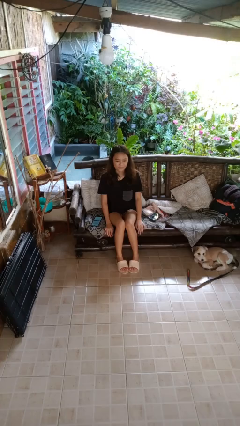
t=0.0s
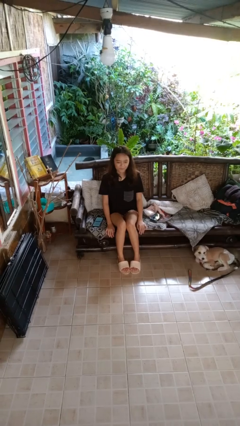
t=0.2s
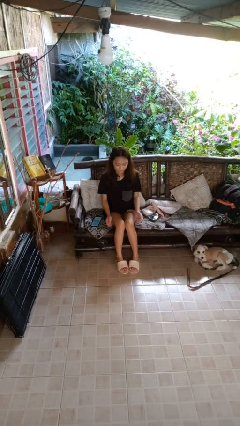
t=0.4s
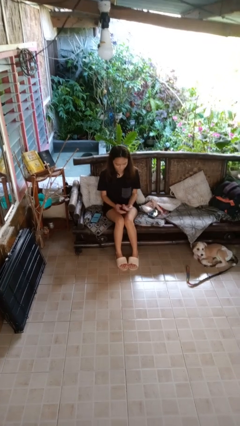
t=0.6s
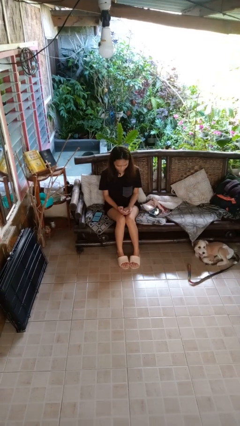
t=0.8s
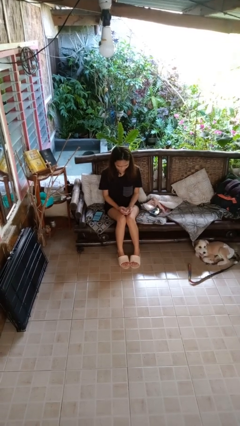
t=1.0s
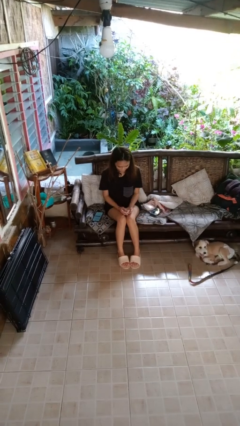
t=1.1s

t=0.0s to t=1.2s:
person looks at hands in lap

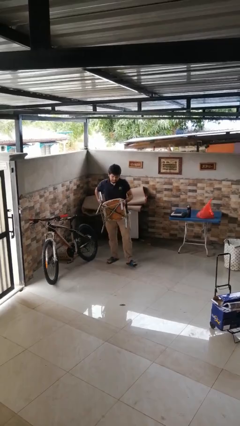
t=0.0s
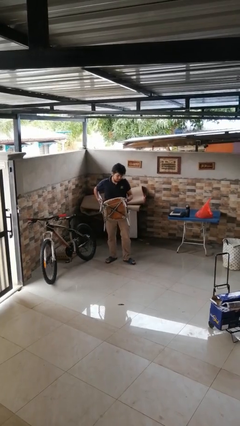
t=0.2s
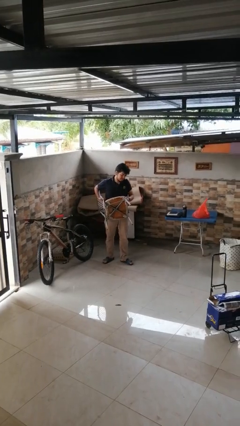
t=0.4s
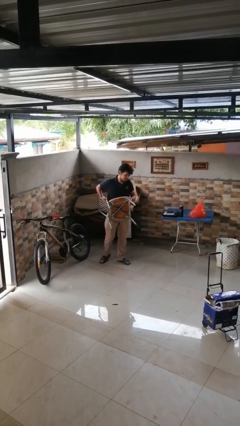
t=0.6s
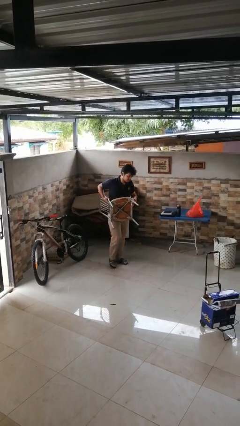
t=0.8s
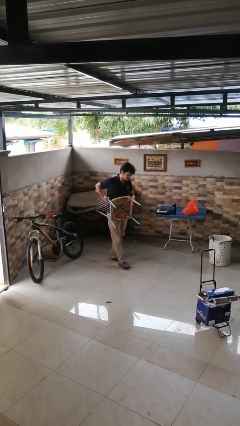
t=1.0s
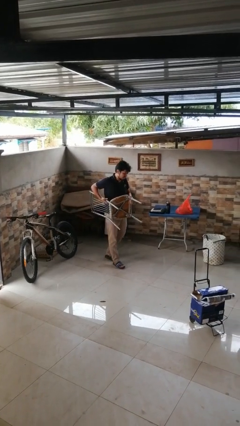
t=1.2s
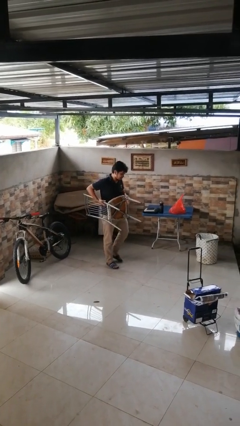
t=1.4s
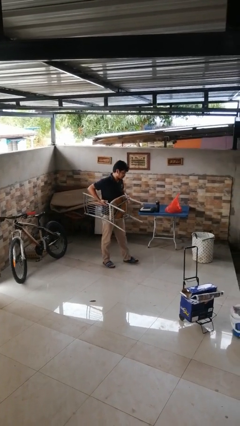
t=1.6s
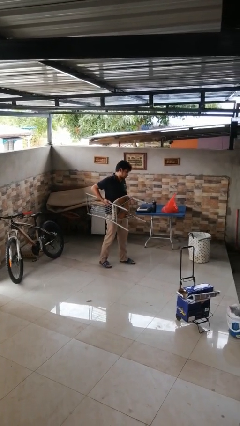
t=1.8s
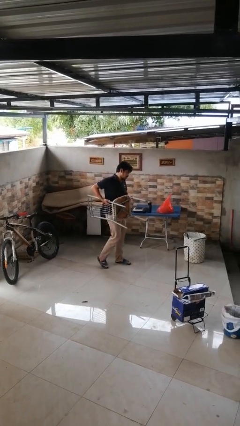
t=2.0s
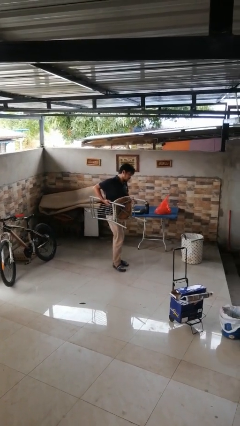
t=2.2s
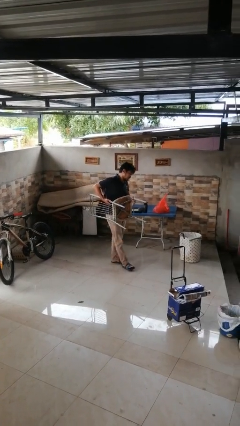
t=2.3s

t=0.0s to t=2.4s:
person carries furniture

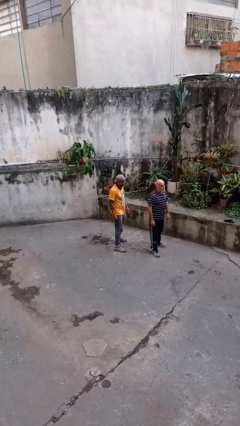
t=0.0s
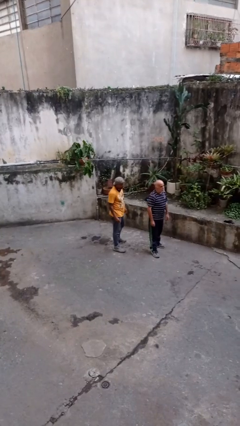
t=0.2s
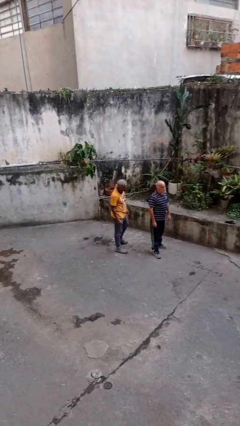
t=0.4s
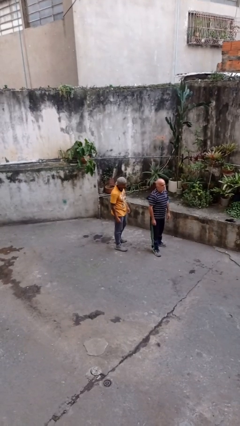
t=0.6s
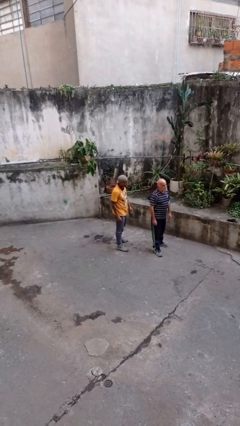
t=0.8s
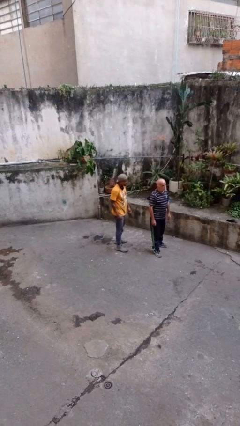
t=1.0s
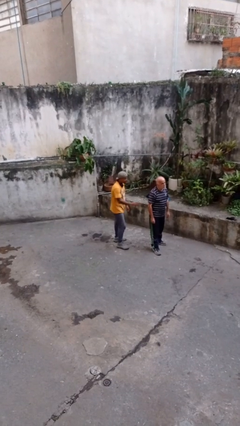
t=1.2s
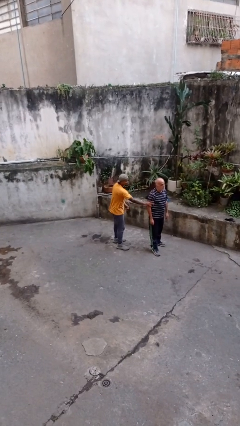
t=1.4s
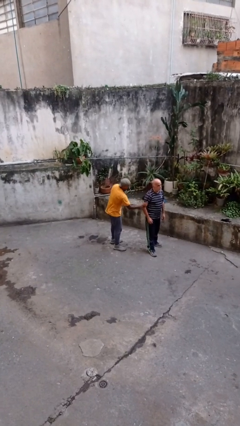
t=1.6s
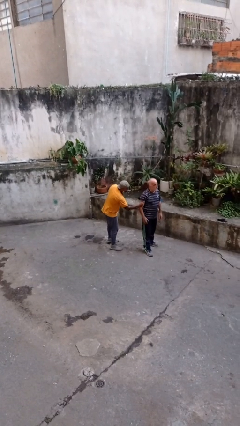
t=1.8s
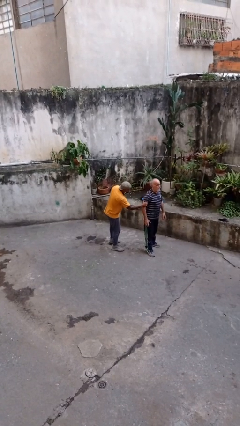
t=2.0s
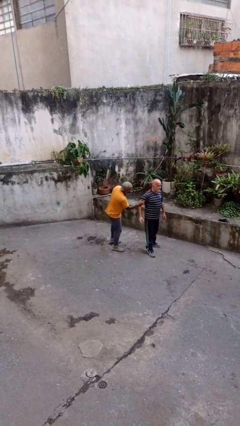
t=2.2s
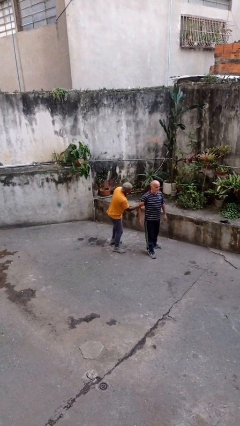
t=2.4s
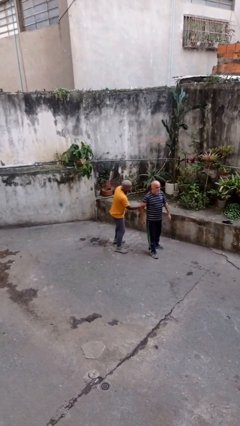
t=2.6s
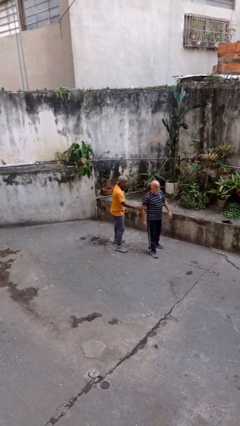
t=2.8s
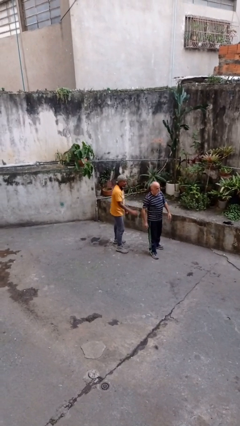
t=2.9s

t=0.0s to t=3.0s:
person grabs person by bicep

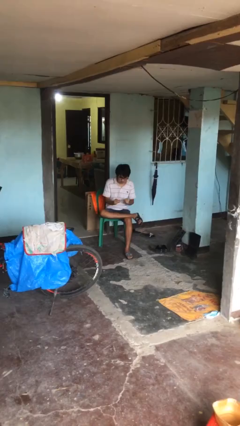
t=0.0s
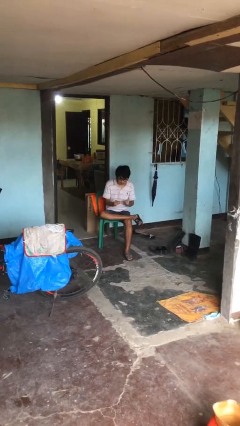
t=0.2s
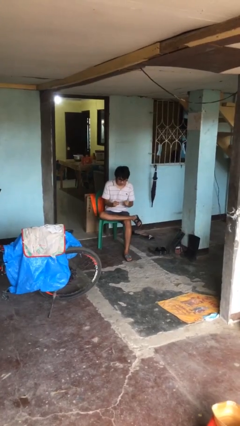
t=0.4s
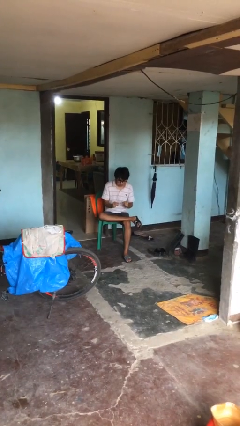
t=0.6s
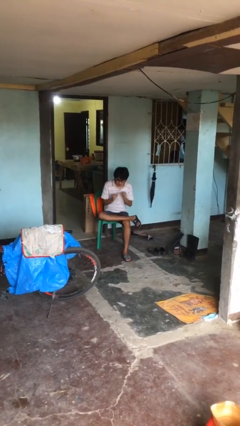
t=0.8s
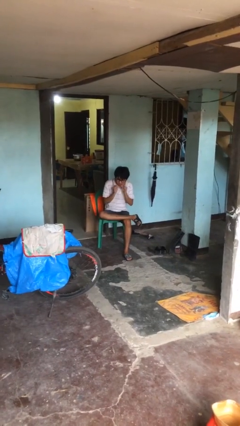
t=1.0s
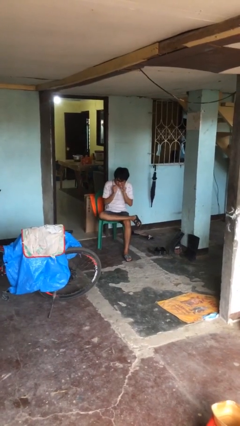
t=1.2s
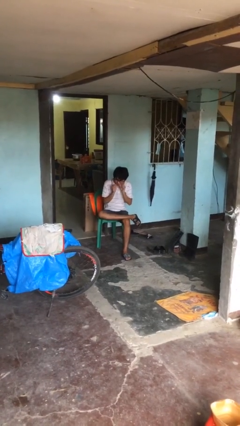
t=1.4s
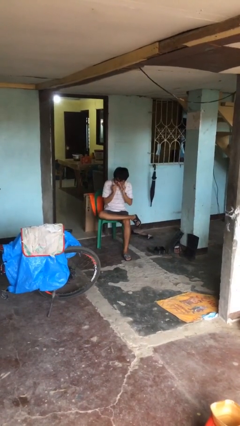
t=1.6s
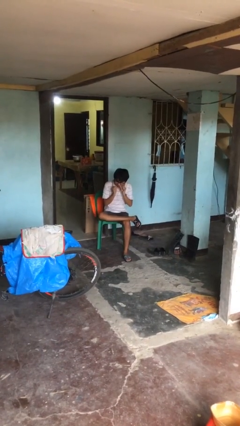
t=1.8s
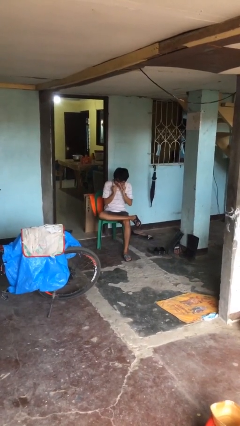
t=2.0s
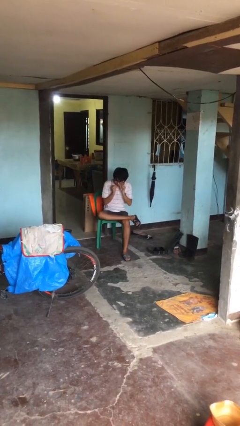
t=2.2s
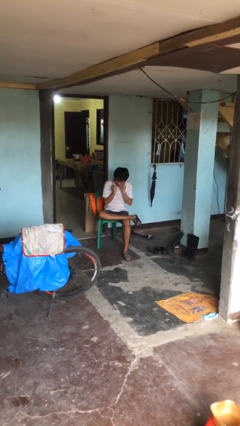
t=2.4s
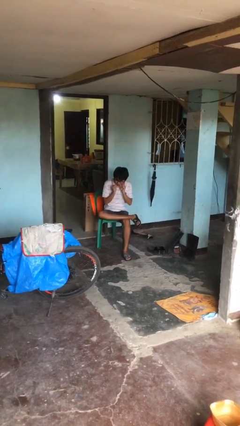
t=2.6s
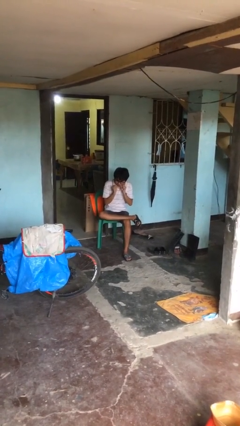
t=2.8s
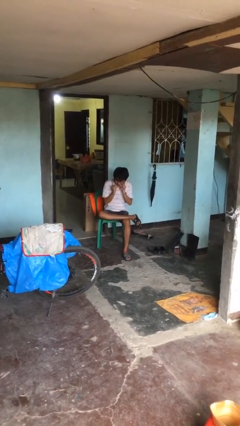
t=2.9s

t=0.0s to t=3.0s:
person flosses

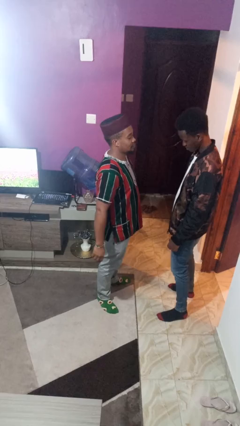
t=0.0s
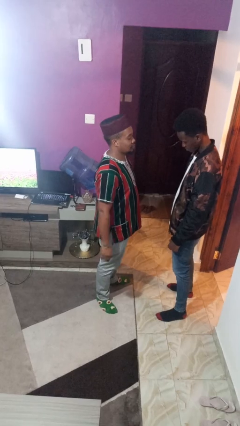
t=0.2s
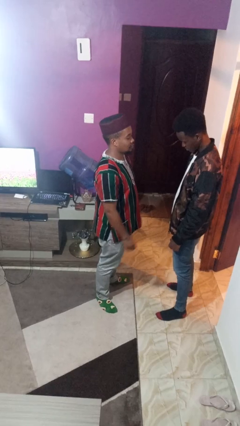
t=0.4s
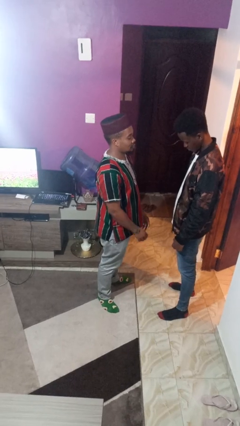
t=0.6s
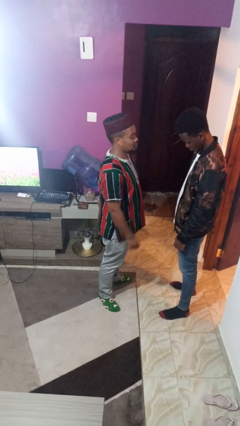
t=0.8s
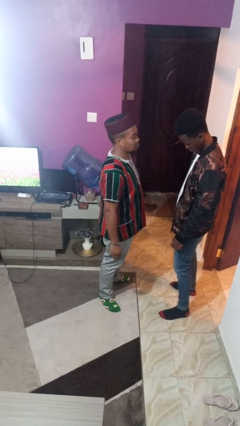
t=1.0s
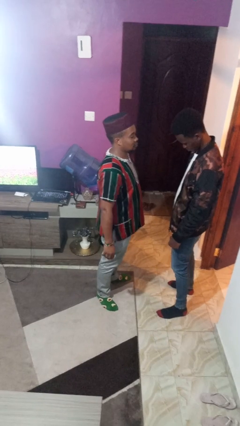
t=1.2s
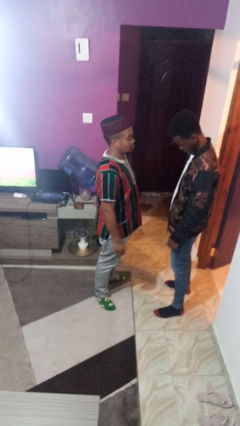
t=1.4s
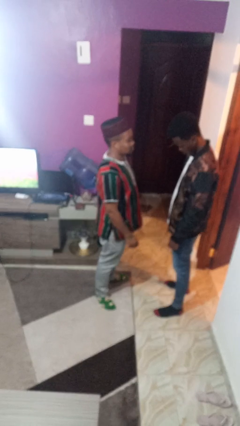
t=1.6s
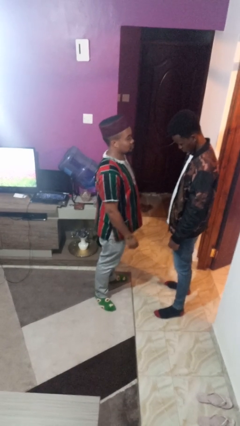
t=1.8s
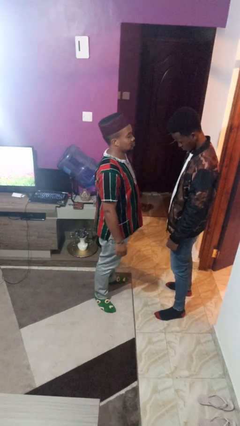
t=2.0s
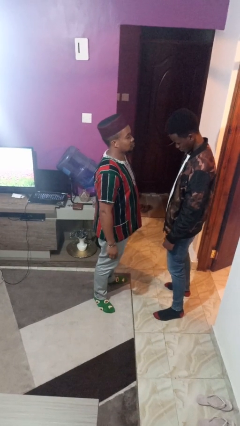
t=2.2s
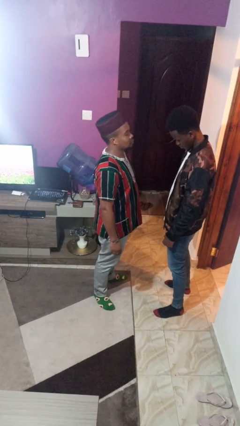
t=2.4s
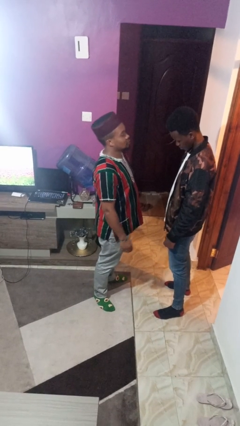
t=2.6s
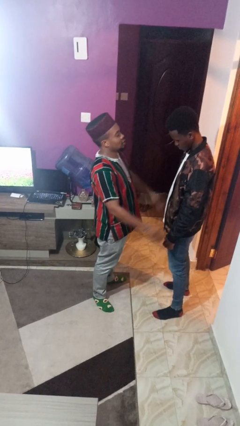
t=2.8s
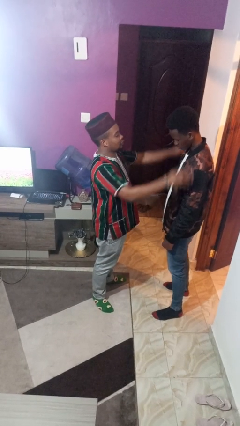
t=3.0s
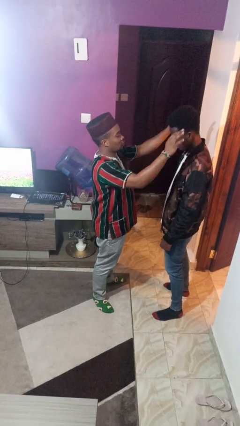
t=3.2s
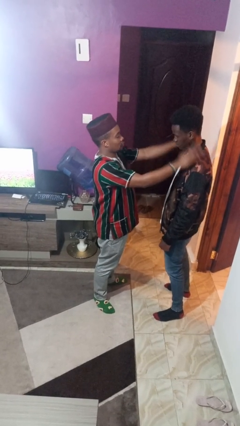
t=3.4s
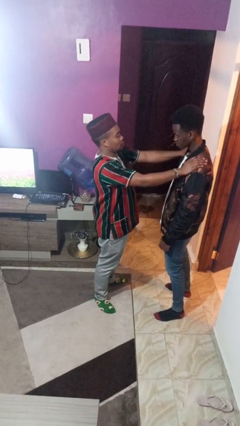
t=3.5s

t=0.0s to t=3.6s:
person closes door with foot

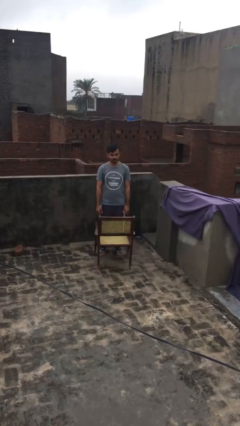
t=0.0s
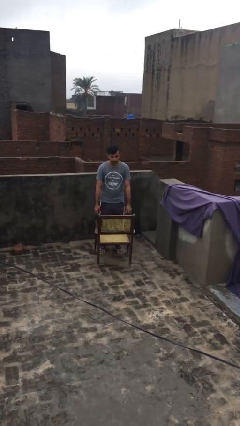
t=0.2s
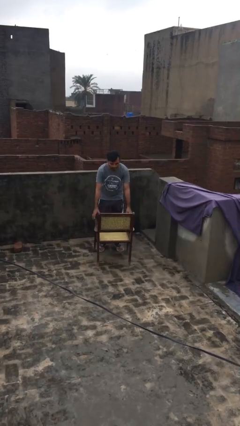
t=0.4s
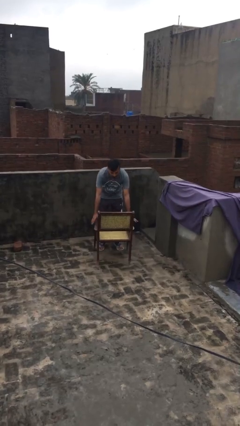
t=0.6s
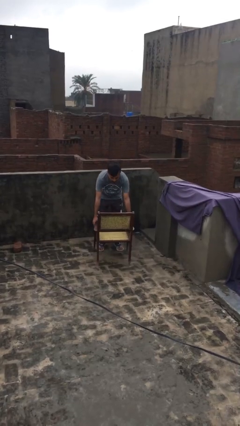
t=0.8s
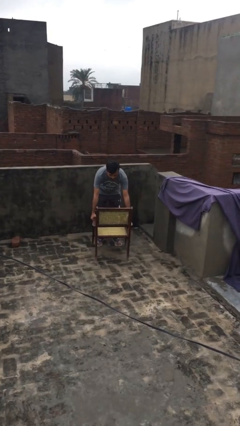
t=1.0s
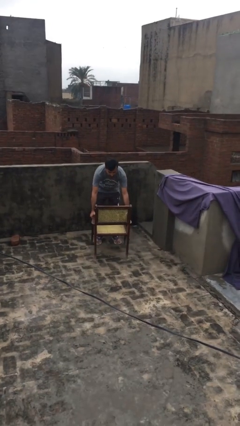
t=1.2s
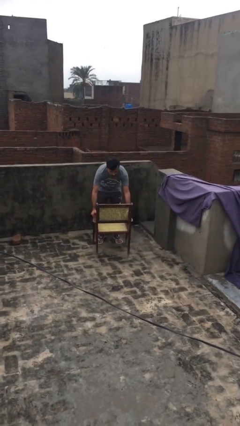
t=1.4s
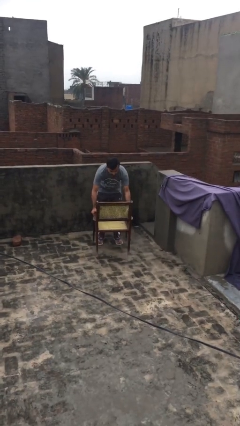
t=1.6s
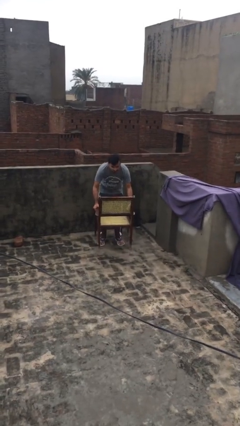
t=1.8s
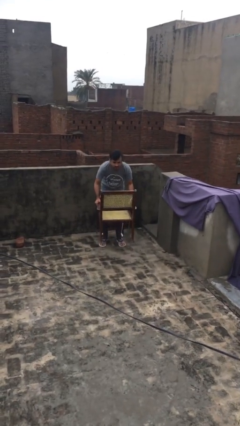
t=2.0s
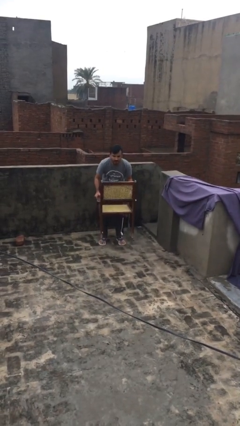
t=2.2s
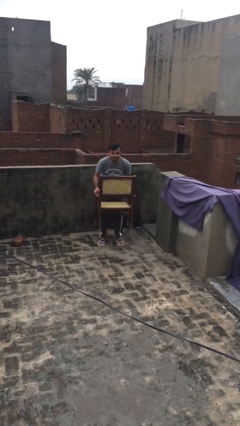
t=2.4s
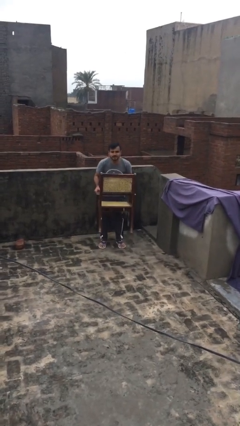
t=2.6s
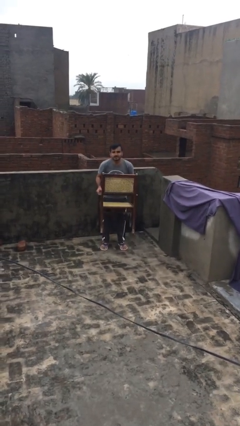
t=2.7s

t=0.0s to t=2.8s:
person picks up object from floor

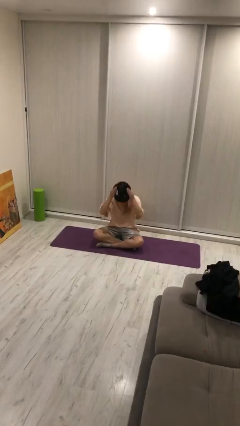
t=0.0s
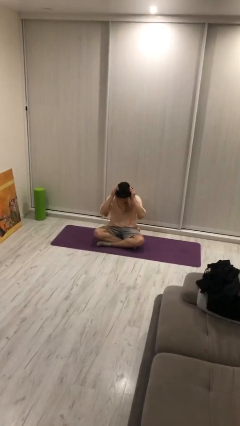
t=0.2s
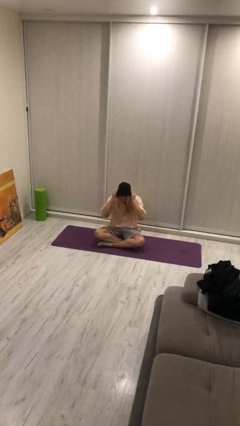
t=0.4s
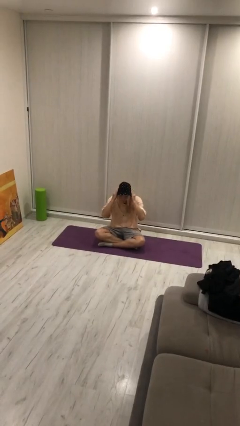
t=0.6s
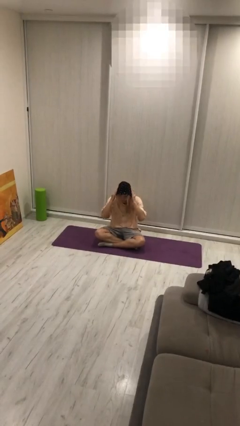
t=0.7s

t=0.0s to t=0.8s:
person puts on hat

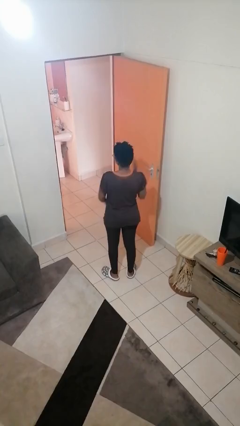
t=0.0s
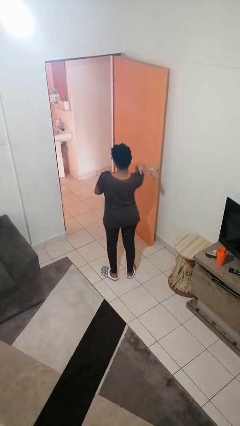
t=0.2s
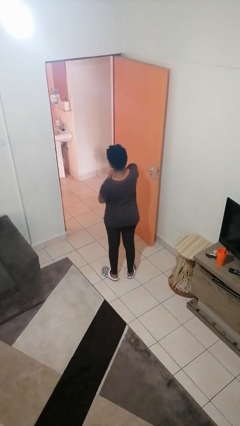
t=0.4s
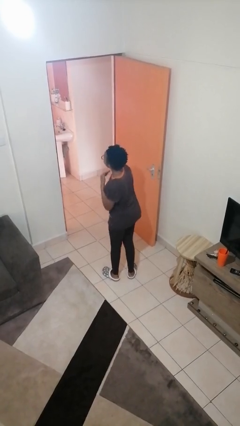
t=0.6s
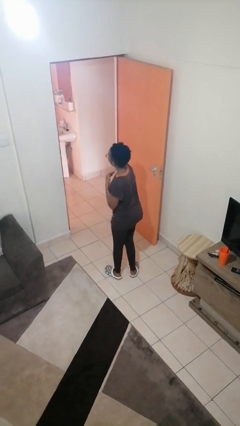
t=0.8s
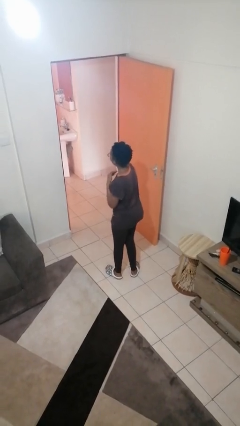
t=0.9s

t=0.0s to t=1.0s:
person karate chop
